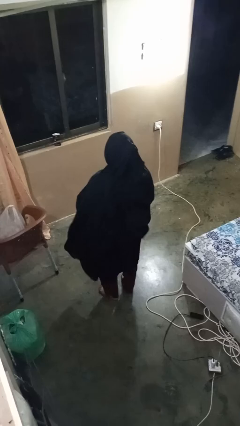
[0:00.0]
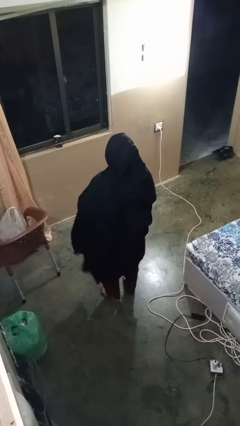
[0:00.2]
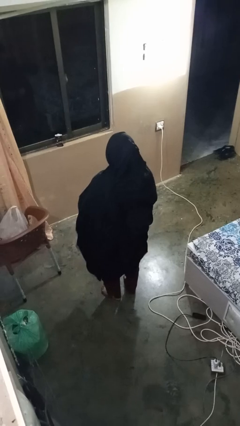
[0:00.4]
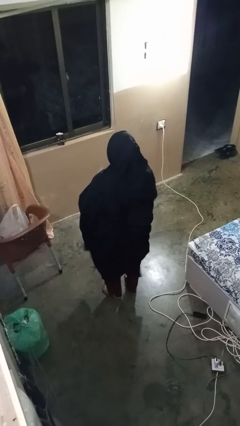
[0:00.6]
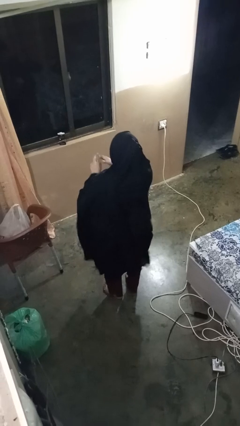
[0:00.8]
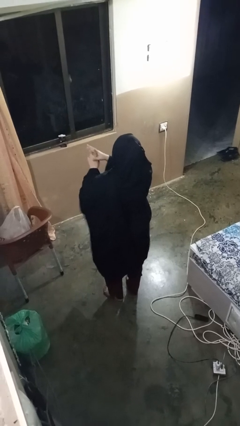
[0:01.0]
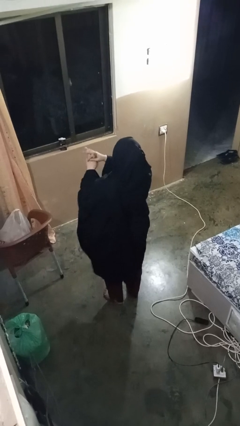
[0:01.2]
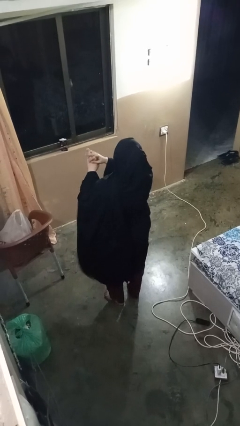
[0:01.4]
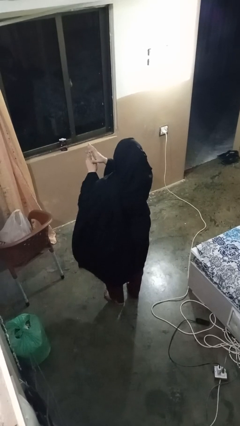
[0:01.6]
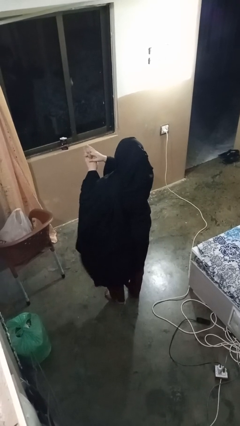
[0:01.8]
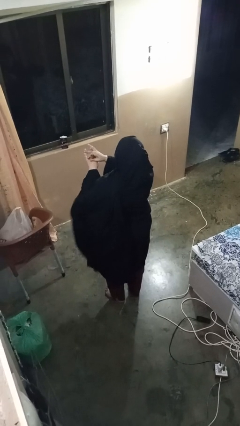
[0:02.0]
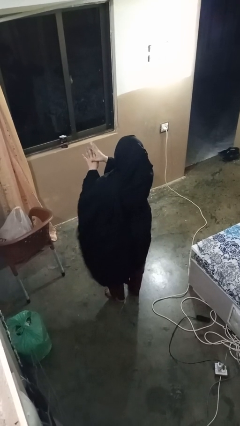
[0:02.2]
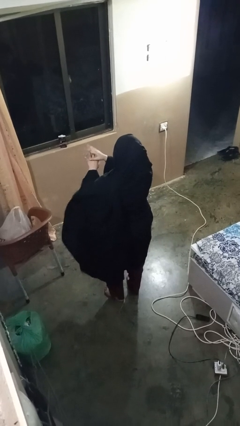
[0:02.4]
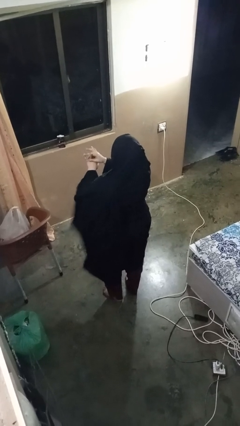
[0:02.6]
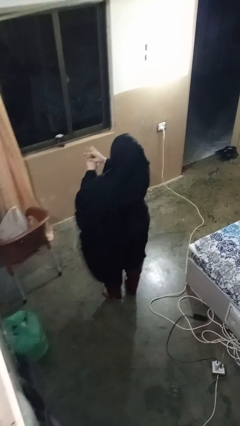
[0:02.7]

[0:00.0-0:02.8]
person cracks knuckles

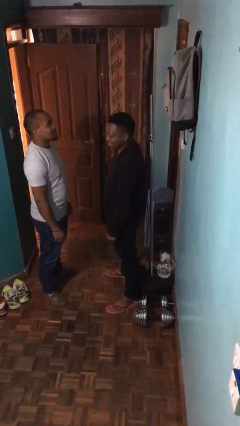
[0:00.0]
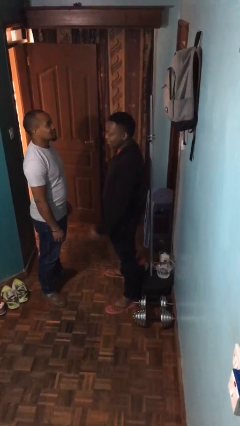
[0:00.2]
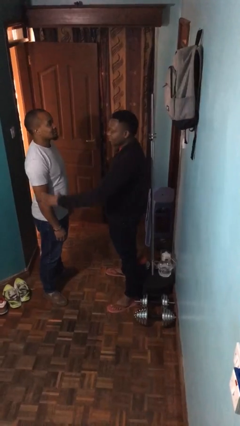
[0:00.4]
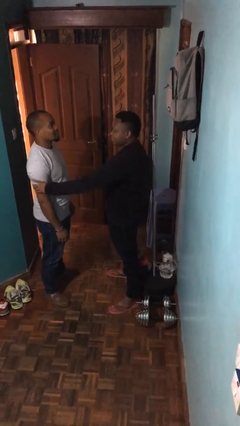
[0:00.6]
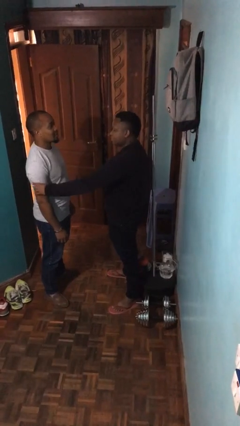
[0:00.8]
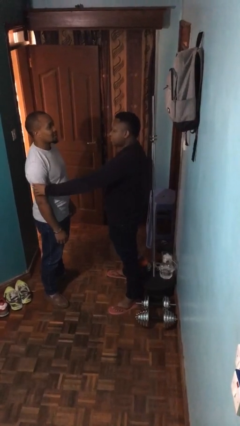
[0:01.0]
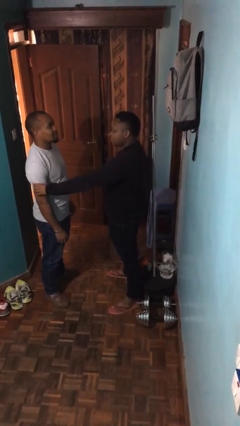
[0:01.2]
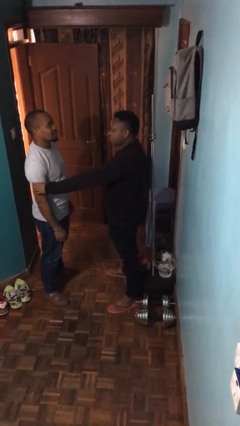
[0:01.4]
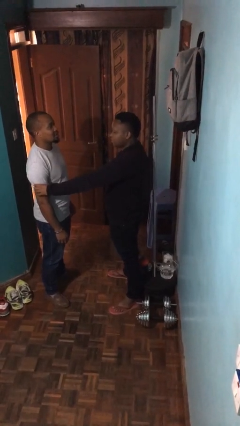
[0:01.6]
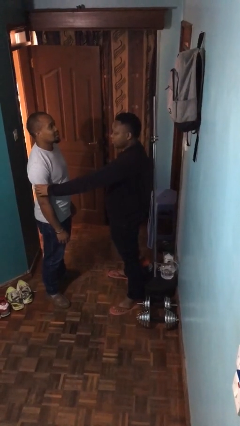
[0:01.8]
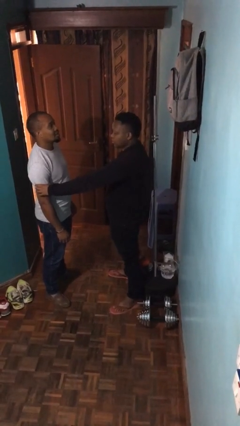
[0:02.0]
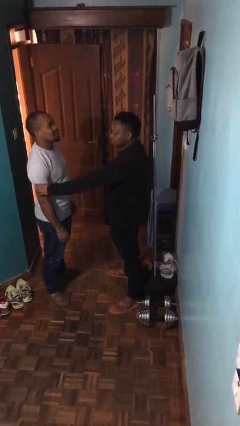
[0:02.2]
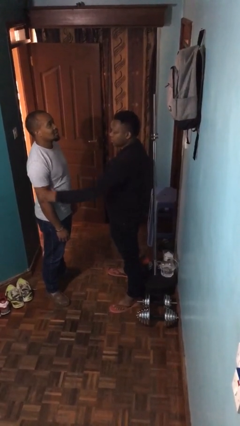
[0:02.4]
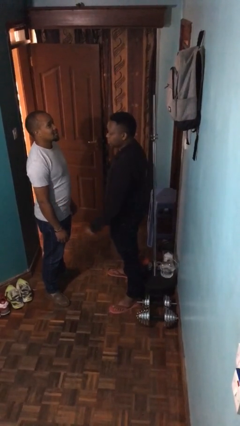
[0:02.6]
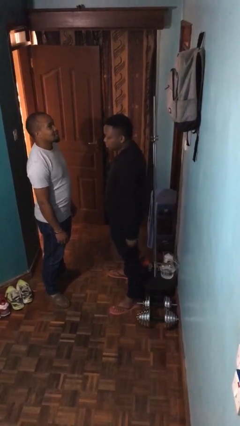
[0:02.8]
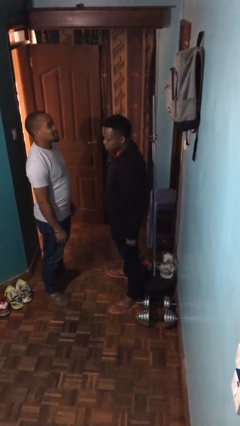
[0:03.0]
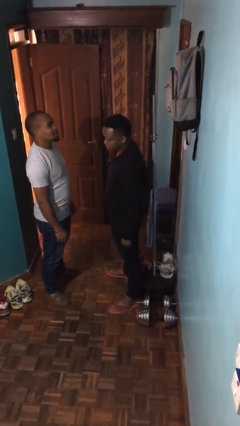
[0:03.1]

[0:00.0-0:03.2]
person grabs person by bicep

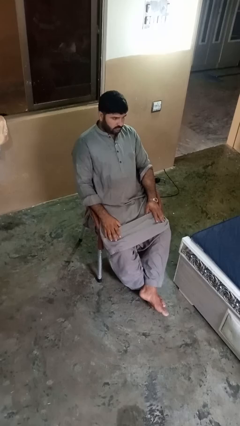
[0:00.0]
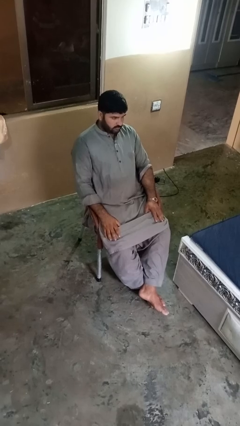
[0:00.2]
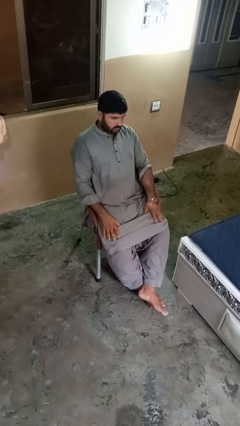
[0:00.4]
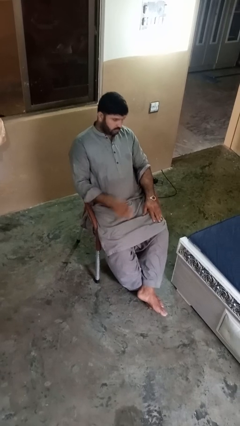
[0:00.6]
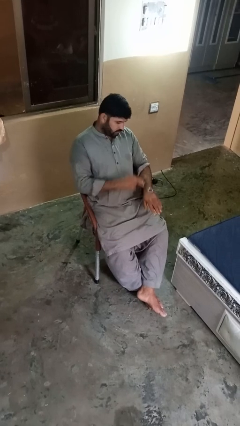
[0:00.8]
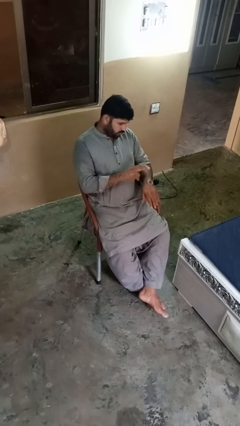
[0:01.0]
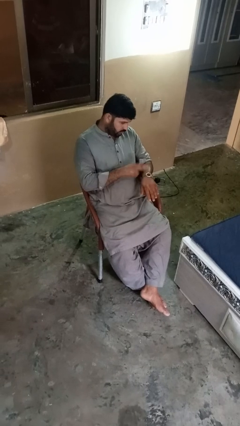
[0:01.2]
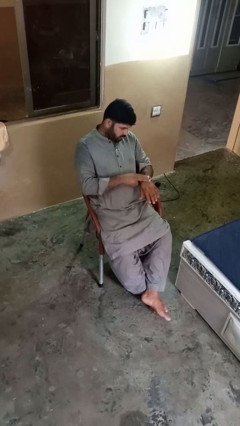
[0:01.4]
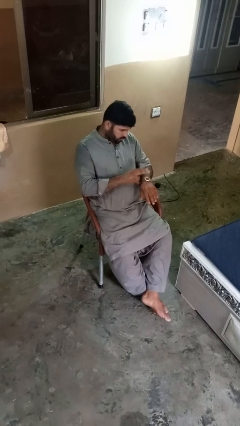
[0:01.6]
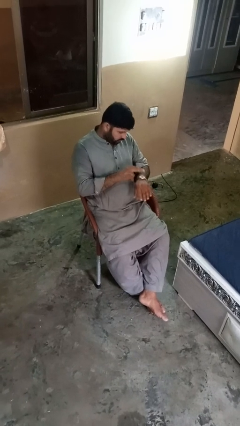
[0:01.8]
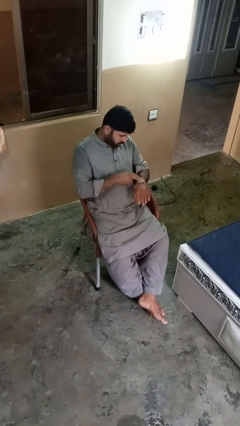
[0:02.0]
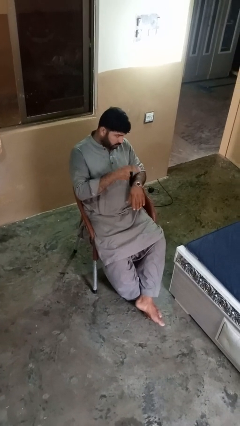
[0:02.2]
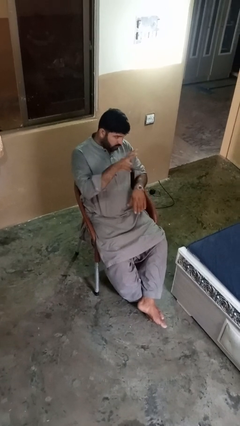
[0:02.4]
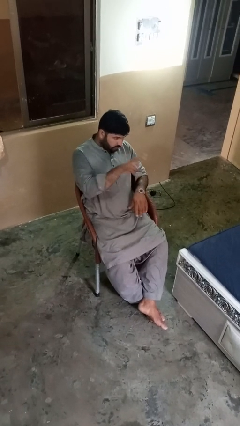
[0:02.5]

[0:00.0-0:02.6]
person gestures watch closely

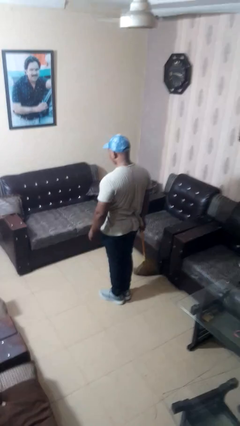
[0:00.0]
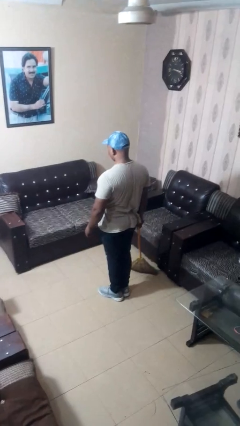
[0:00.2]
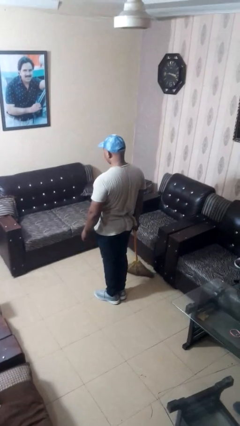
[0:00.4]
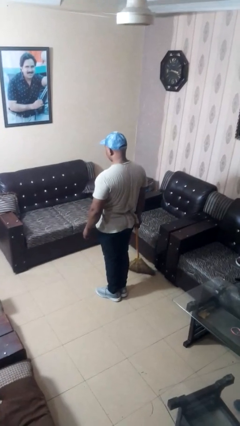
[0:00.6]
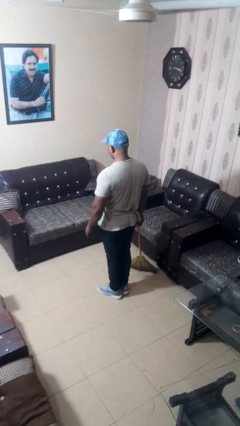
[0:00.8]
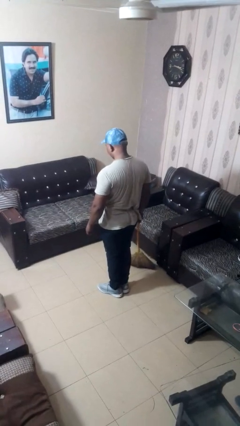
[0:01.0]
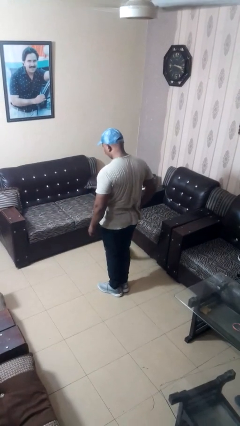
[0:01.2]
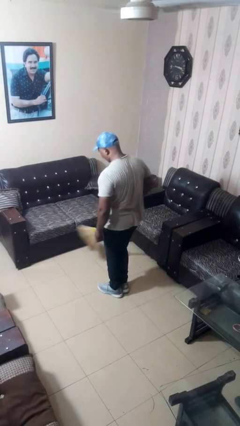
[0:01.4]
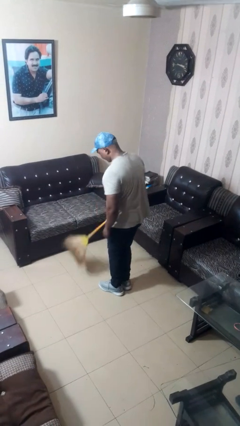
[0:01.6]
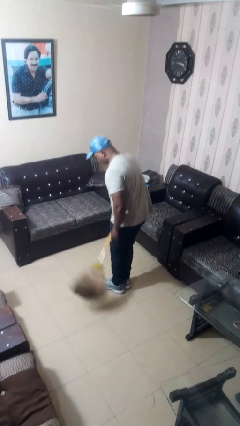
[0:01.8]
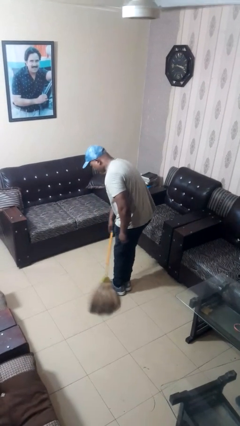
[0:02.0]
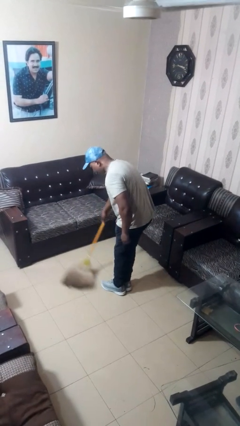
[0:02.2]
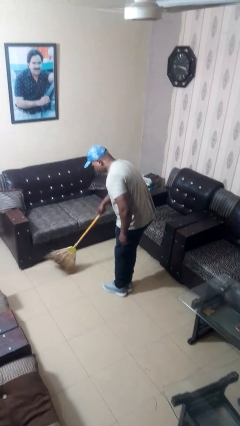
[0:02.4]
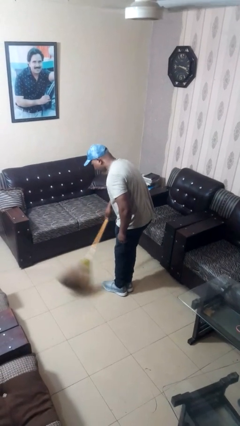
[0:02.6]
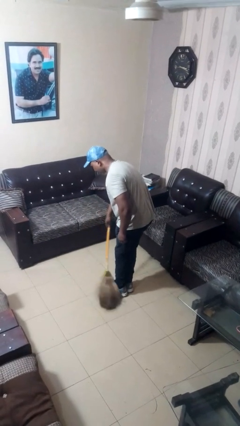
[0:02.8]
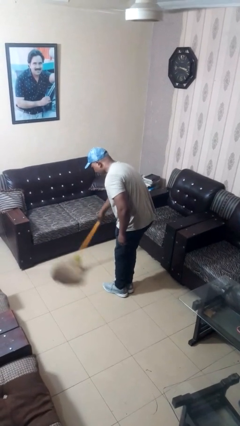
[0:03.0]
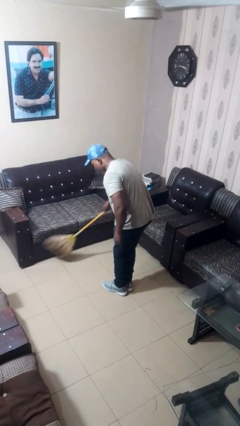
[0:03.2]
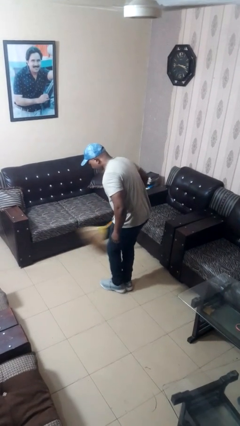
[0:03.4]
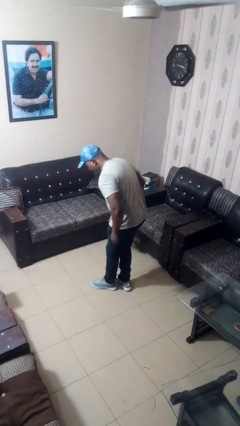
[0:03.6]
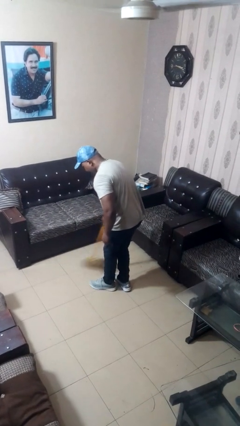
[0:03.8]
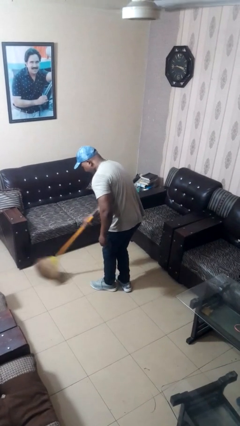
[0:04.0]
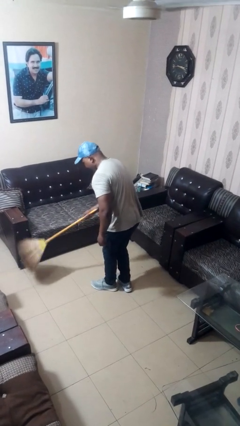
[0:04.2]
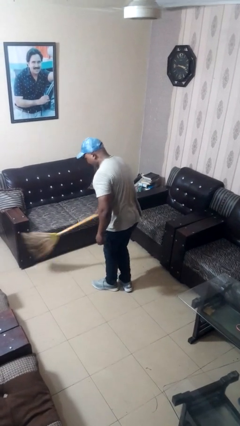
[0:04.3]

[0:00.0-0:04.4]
person sweeps floor

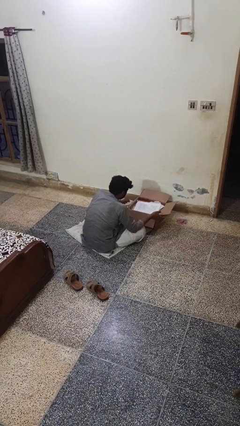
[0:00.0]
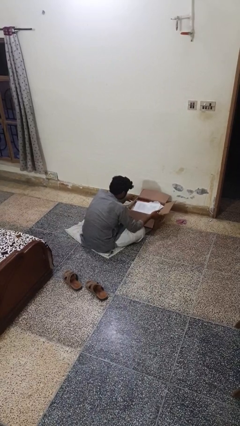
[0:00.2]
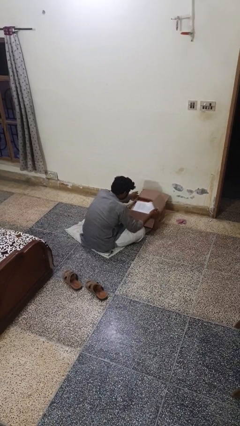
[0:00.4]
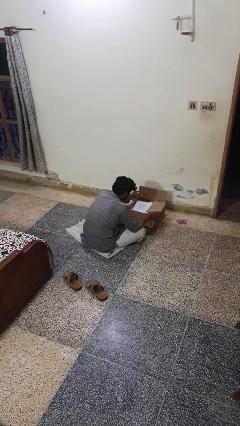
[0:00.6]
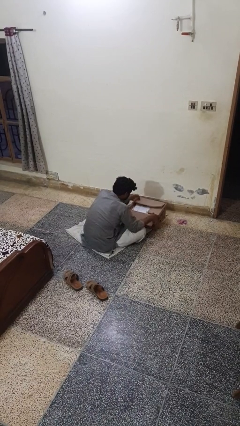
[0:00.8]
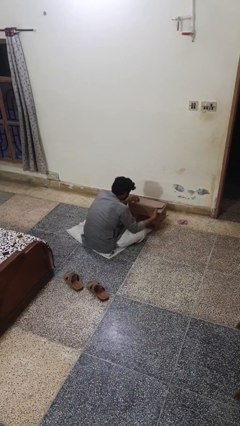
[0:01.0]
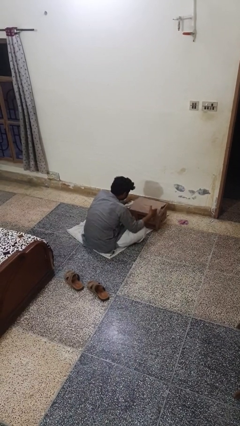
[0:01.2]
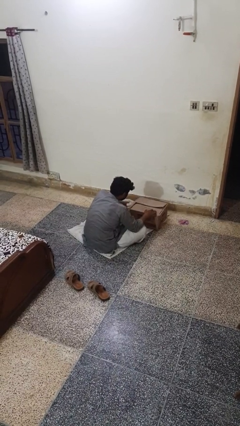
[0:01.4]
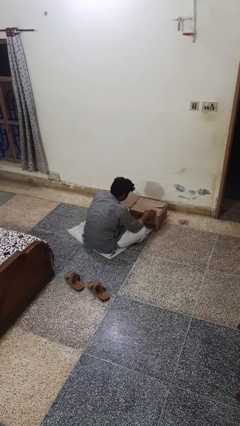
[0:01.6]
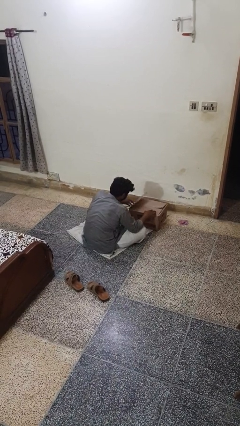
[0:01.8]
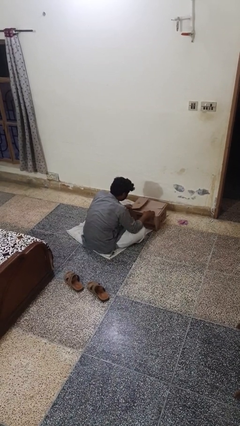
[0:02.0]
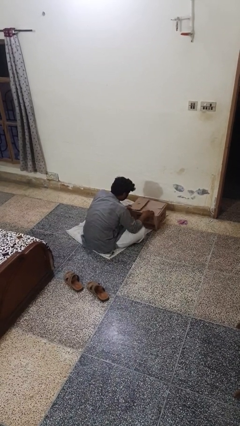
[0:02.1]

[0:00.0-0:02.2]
person closes box

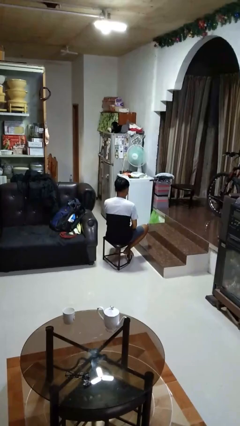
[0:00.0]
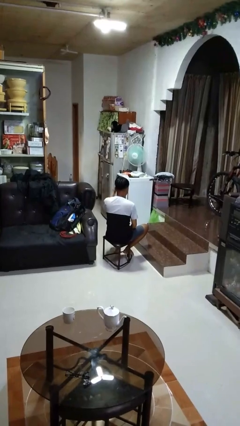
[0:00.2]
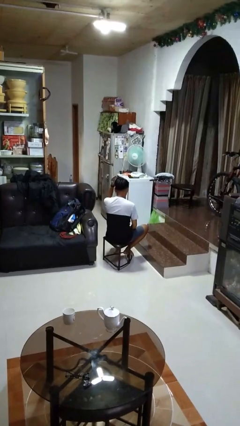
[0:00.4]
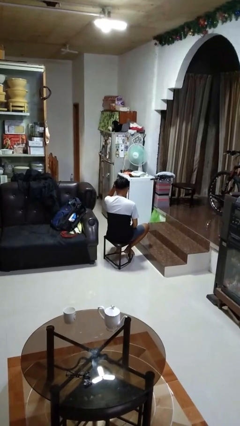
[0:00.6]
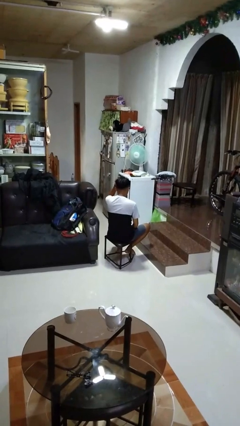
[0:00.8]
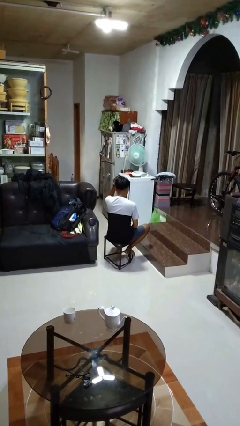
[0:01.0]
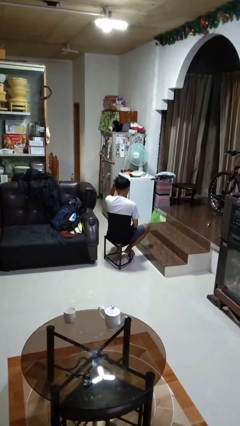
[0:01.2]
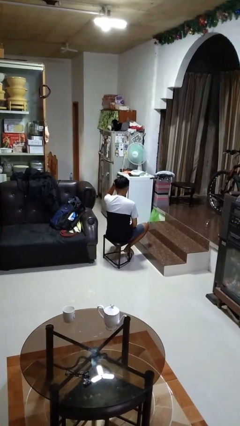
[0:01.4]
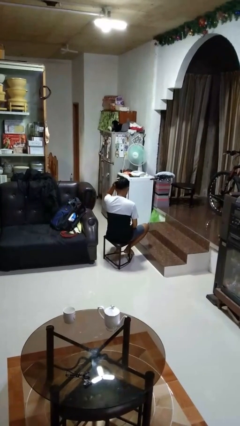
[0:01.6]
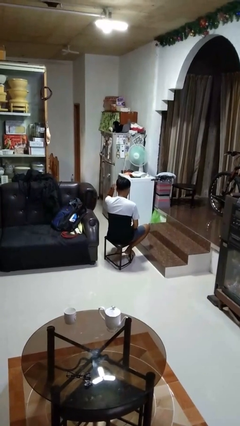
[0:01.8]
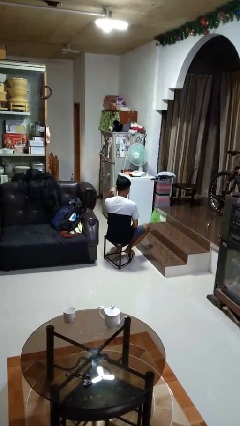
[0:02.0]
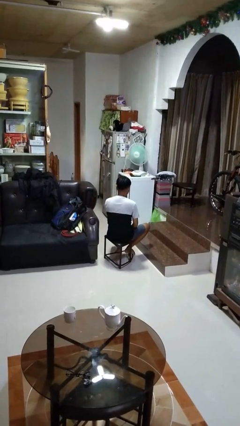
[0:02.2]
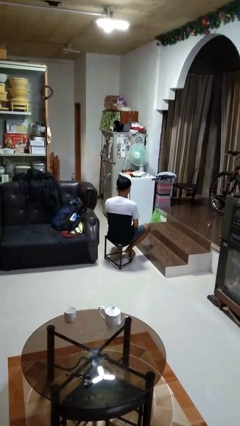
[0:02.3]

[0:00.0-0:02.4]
person pats head
